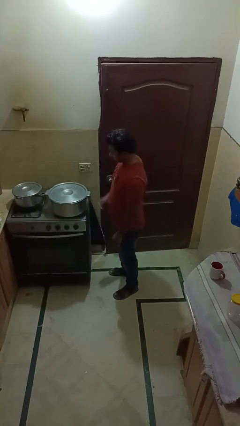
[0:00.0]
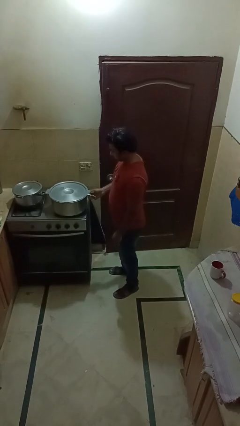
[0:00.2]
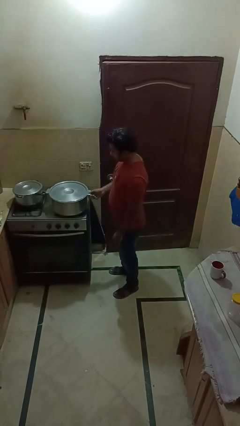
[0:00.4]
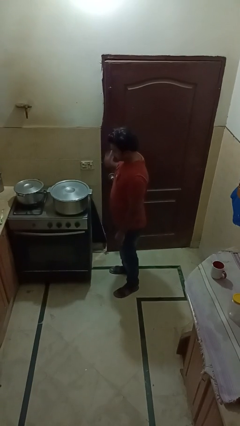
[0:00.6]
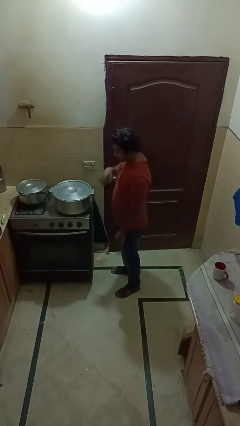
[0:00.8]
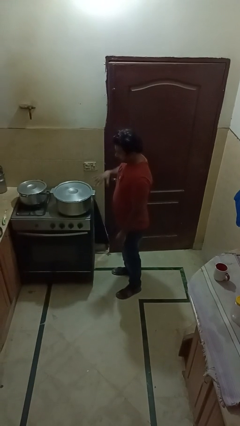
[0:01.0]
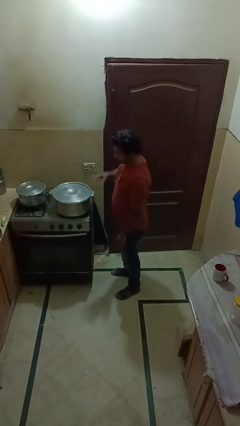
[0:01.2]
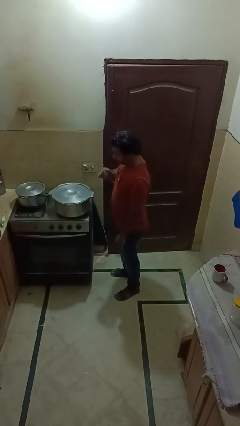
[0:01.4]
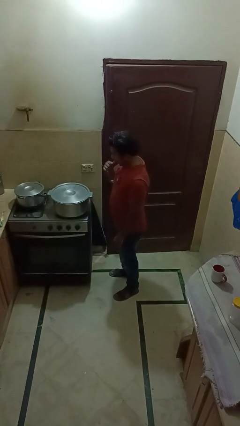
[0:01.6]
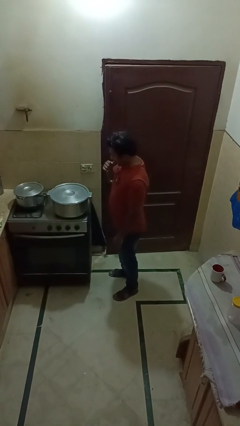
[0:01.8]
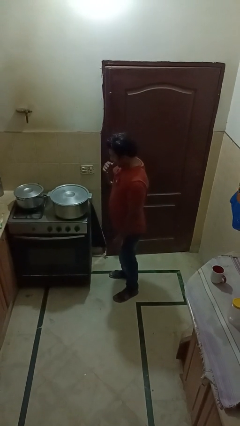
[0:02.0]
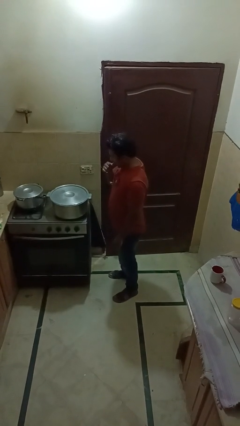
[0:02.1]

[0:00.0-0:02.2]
person burns hand

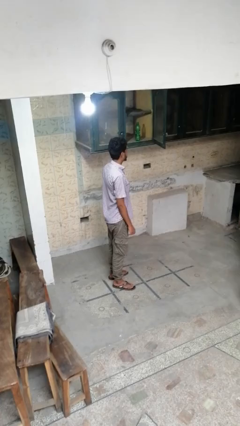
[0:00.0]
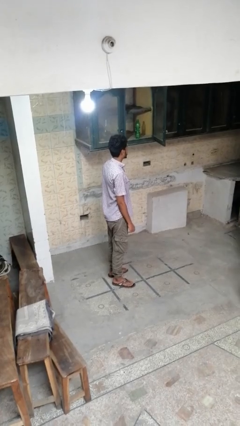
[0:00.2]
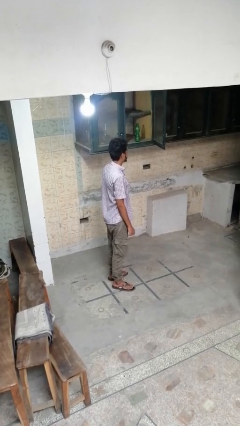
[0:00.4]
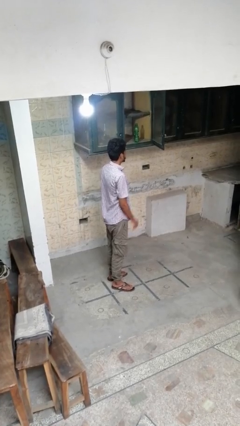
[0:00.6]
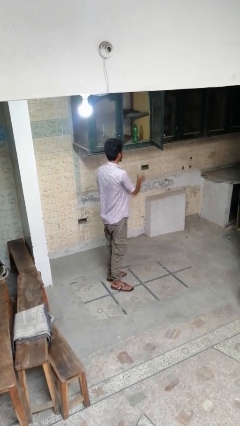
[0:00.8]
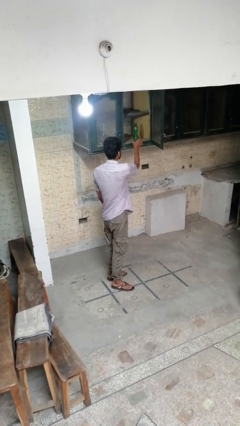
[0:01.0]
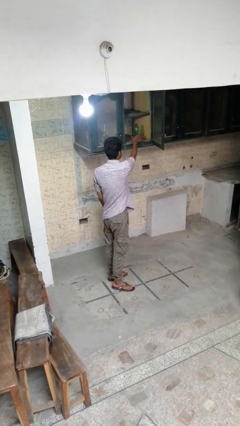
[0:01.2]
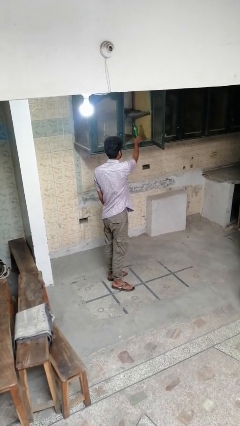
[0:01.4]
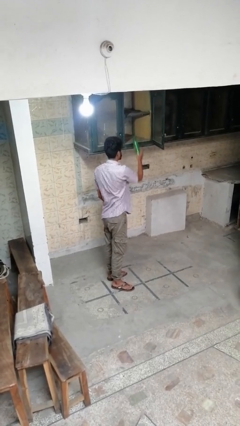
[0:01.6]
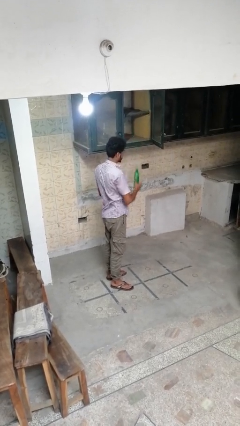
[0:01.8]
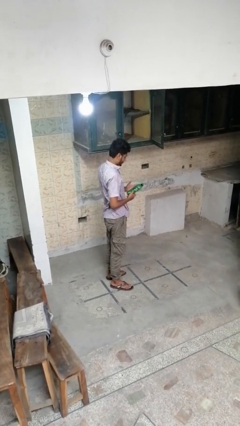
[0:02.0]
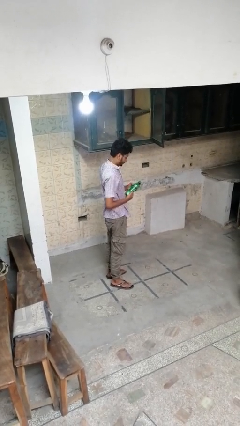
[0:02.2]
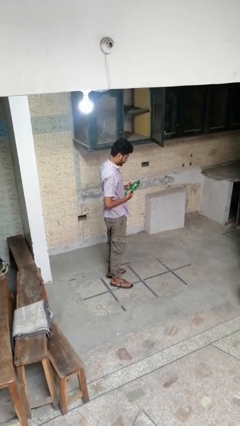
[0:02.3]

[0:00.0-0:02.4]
person picks up object from cabinet

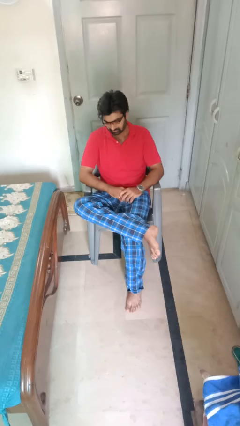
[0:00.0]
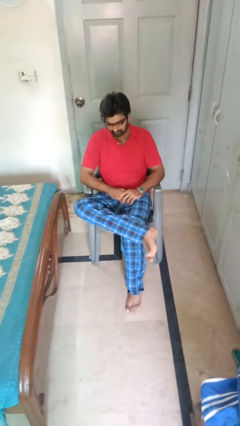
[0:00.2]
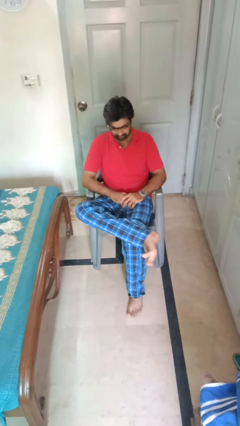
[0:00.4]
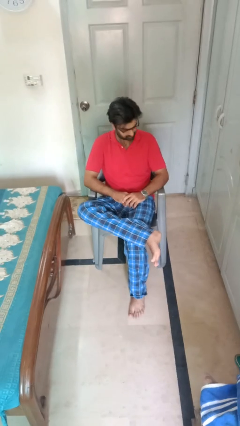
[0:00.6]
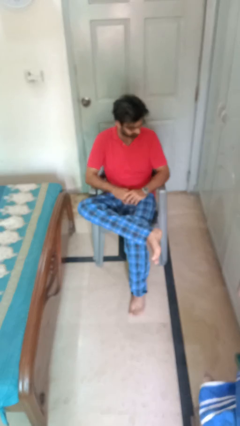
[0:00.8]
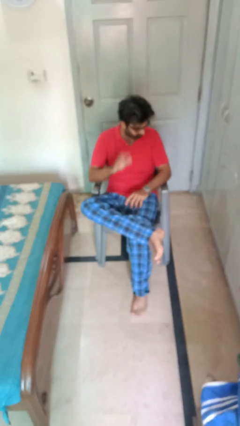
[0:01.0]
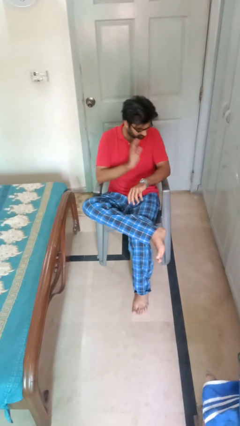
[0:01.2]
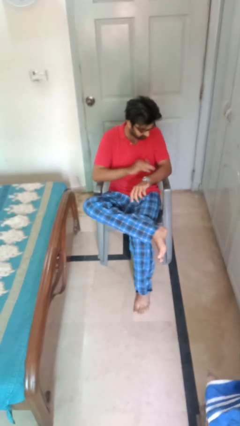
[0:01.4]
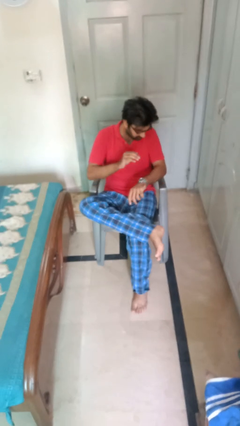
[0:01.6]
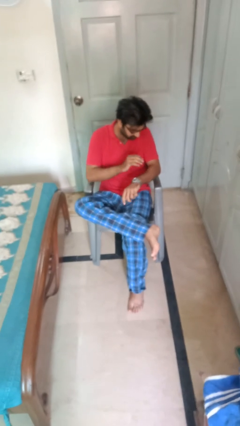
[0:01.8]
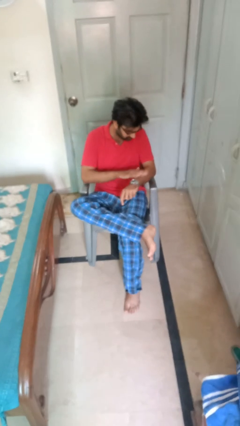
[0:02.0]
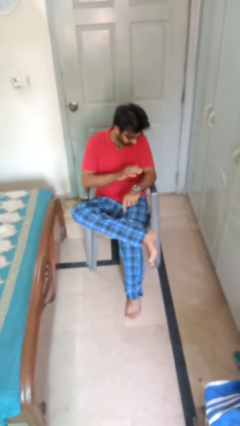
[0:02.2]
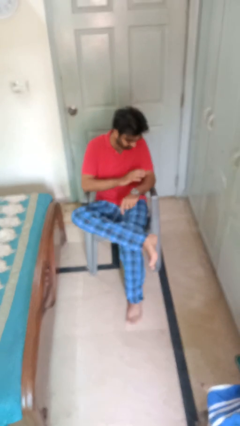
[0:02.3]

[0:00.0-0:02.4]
person swats bug

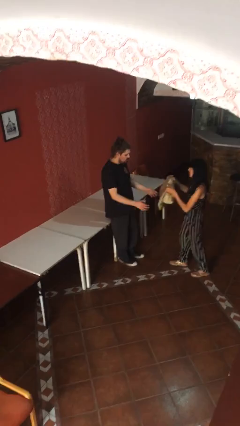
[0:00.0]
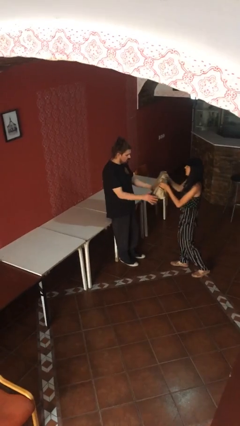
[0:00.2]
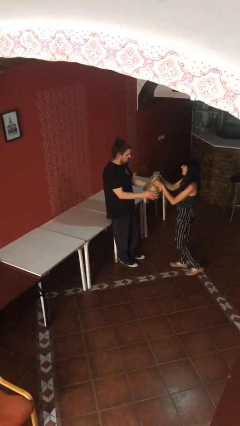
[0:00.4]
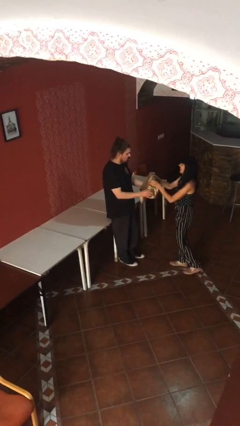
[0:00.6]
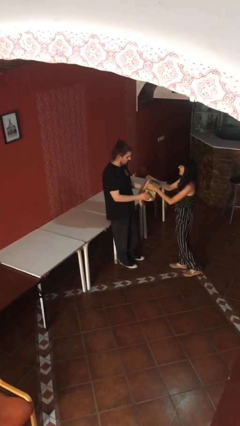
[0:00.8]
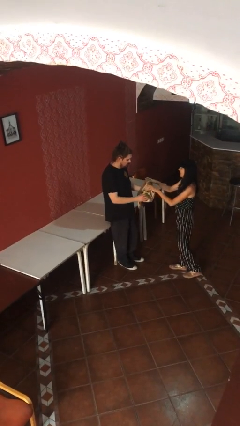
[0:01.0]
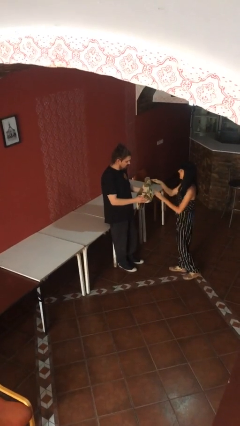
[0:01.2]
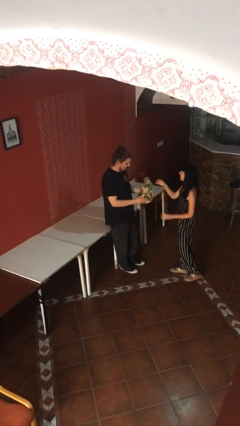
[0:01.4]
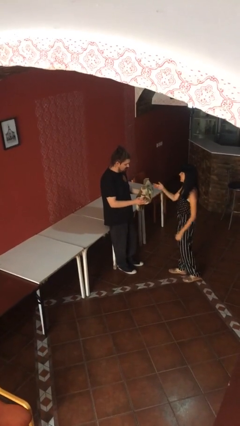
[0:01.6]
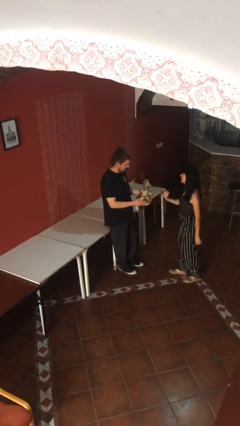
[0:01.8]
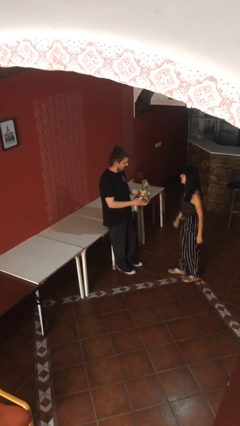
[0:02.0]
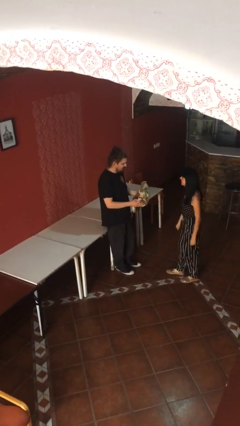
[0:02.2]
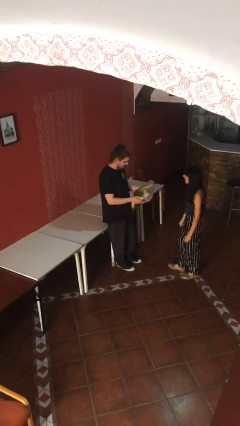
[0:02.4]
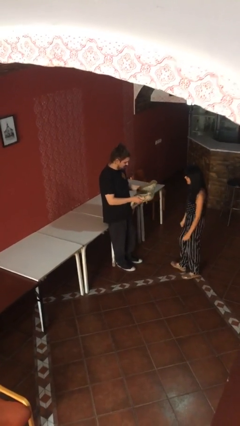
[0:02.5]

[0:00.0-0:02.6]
person transfers object to person

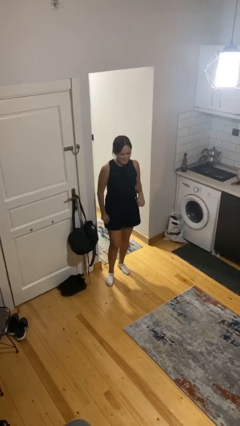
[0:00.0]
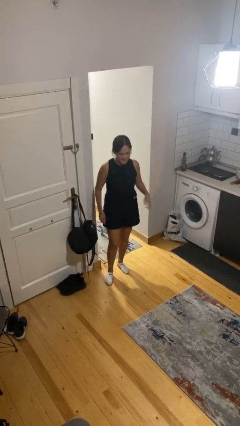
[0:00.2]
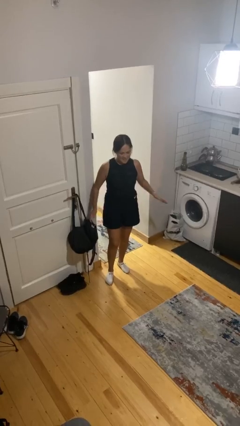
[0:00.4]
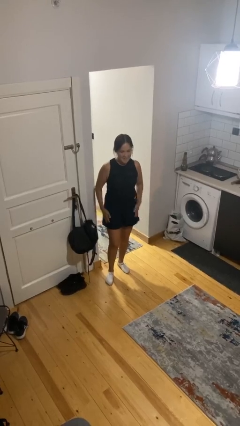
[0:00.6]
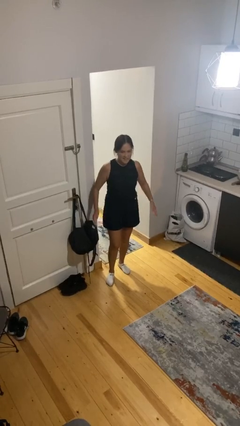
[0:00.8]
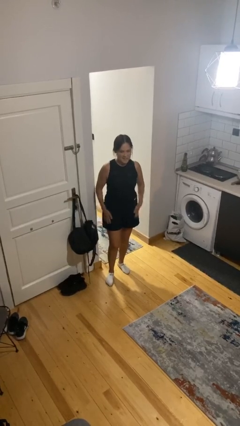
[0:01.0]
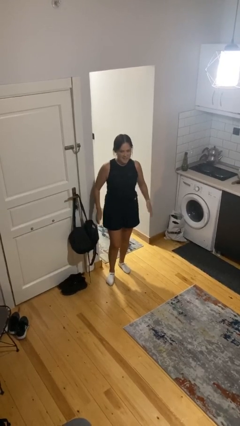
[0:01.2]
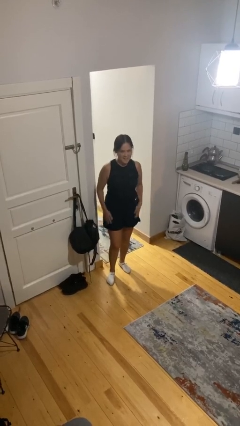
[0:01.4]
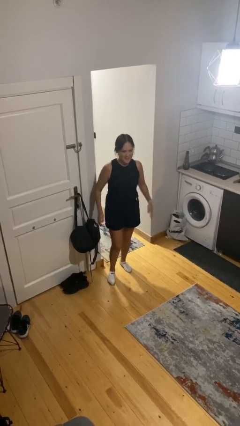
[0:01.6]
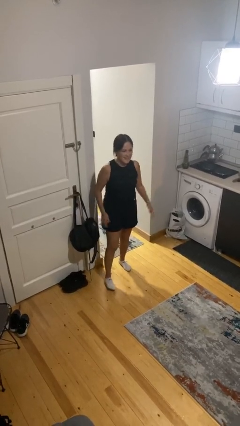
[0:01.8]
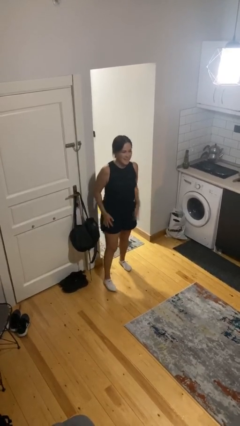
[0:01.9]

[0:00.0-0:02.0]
person slaps hands on thighs

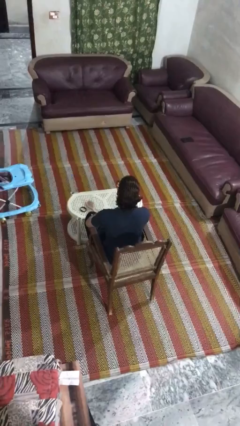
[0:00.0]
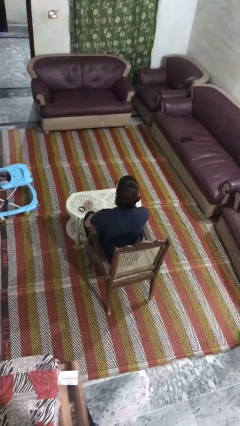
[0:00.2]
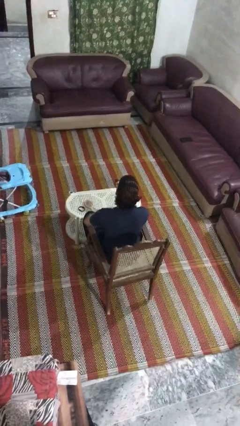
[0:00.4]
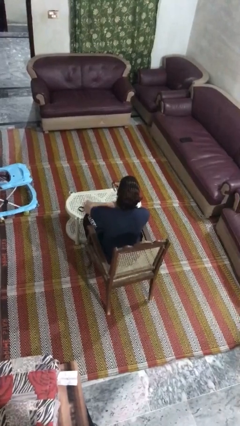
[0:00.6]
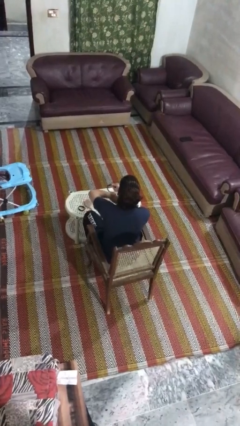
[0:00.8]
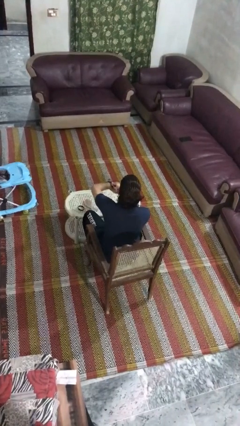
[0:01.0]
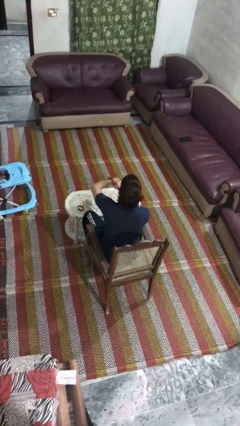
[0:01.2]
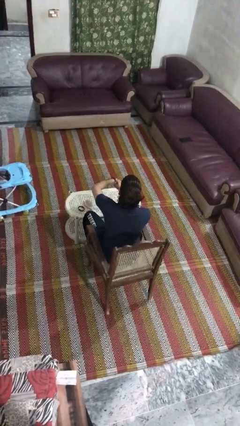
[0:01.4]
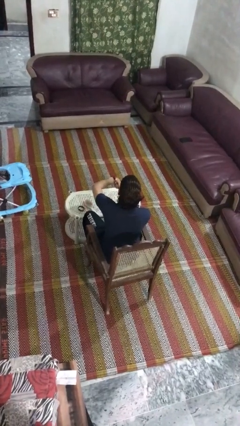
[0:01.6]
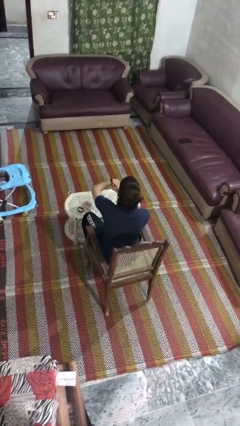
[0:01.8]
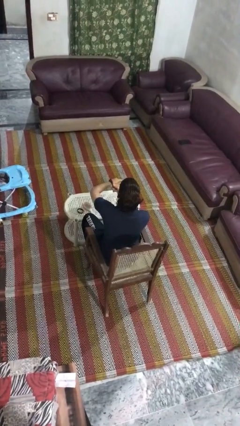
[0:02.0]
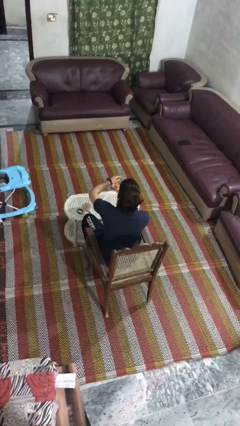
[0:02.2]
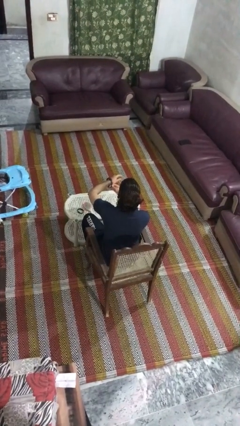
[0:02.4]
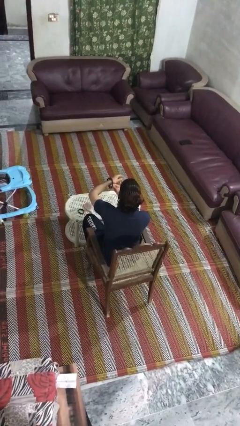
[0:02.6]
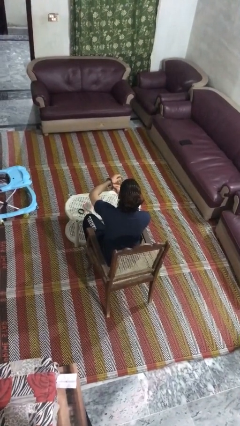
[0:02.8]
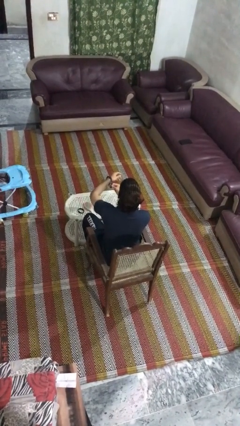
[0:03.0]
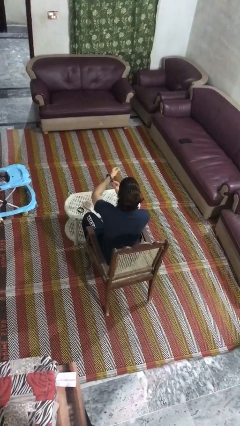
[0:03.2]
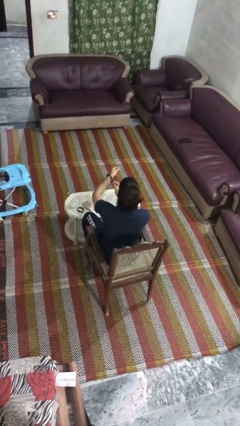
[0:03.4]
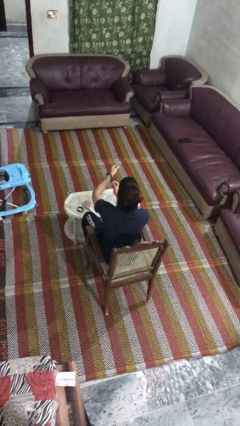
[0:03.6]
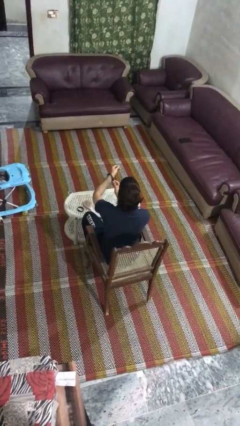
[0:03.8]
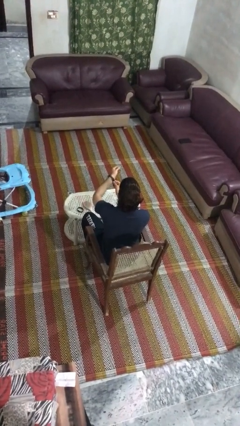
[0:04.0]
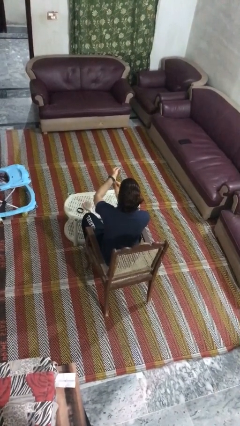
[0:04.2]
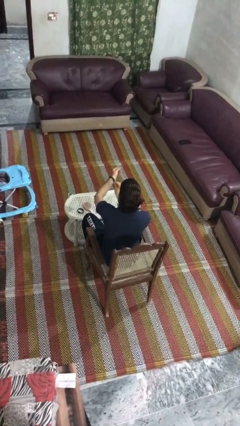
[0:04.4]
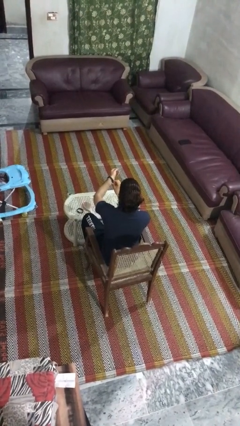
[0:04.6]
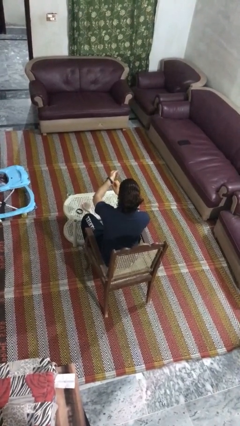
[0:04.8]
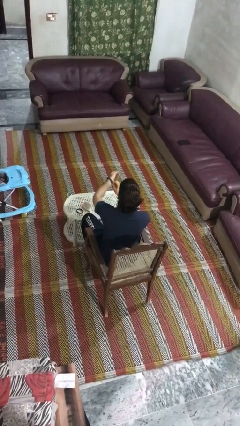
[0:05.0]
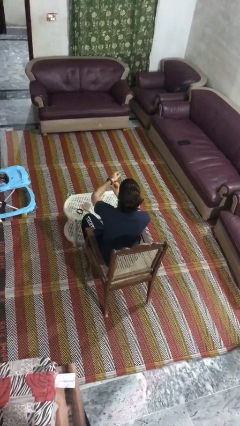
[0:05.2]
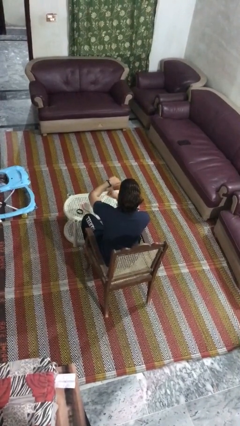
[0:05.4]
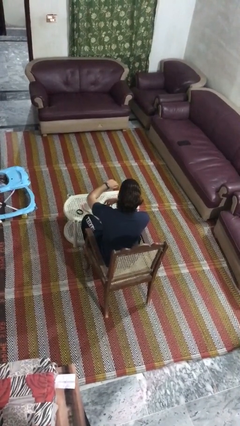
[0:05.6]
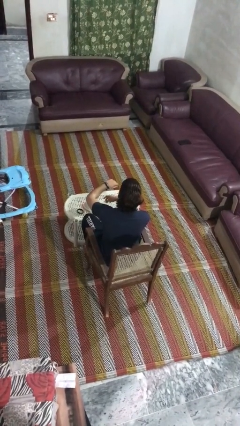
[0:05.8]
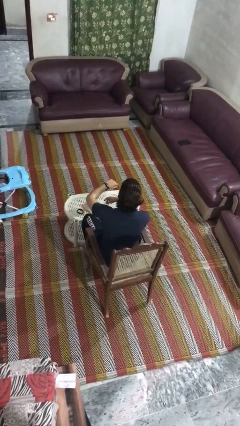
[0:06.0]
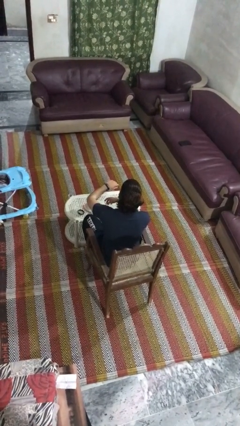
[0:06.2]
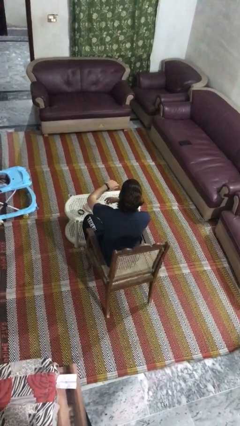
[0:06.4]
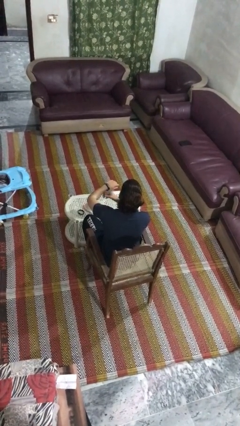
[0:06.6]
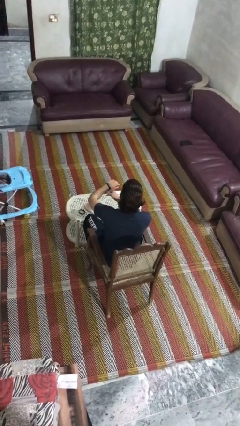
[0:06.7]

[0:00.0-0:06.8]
person puts on wristwatch
